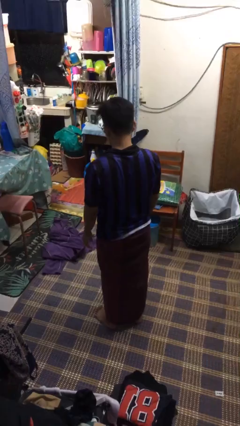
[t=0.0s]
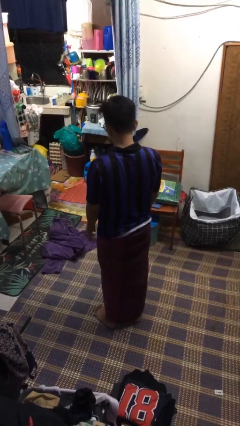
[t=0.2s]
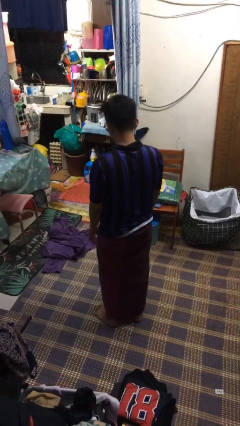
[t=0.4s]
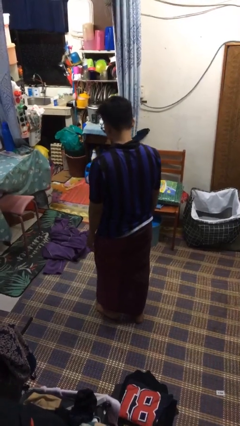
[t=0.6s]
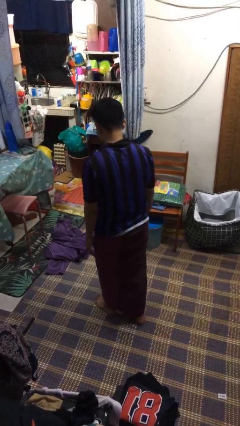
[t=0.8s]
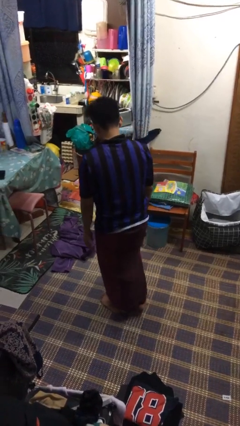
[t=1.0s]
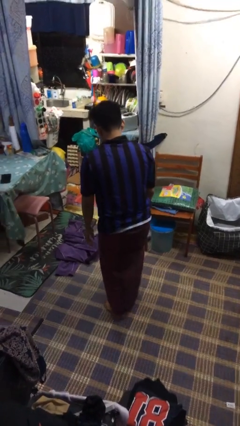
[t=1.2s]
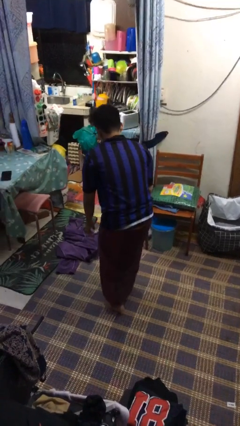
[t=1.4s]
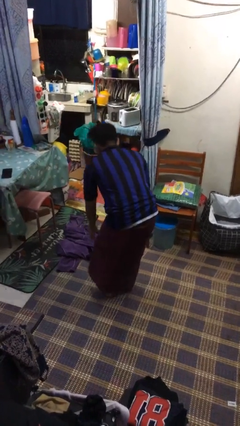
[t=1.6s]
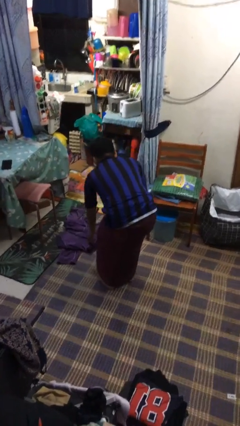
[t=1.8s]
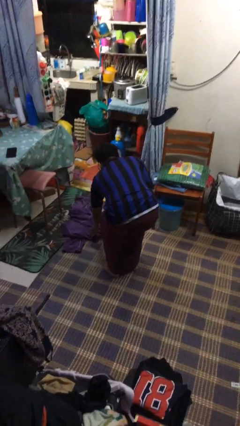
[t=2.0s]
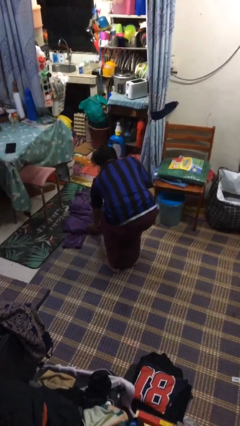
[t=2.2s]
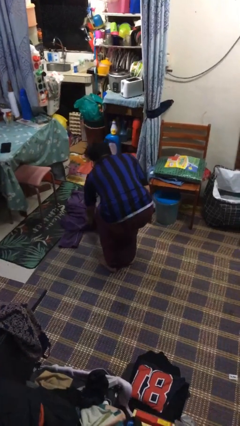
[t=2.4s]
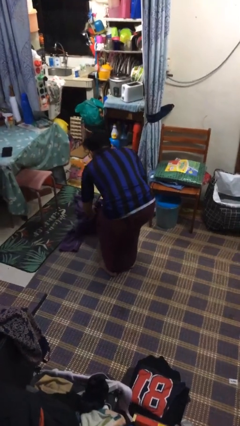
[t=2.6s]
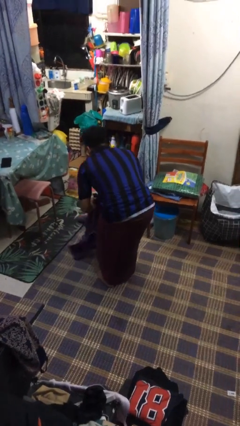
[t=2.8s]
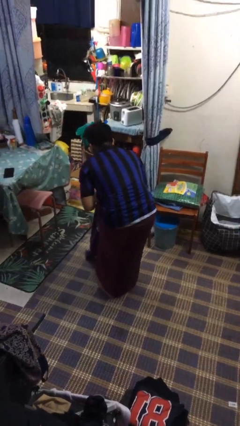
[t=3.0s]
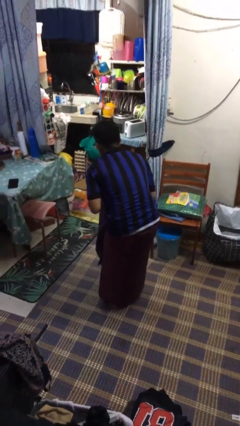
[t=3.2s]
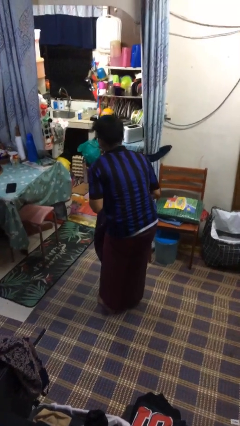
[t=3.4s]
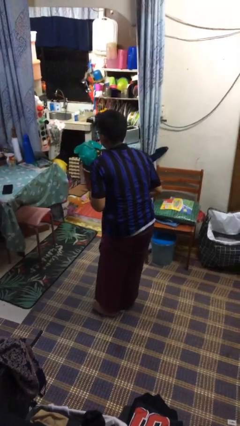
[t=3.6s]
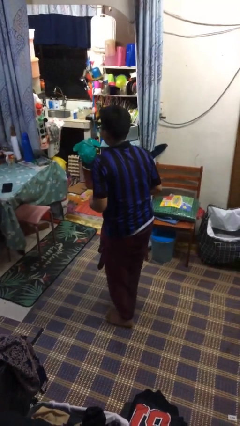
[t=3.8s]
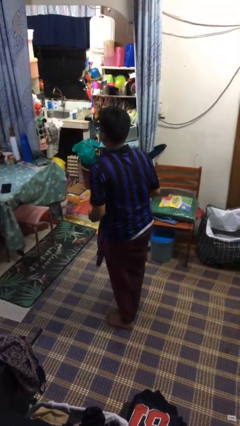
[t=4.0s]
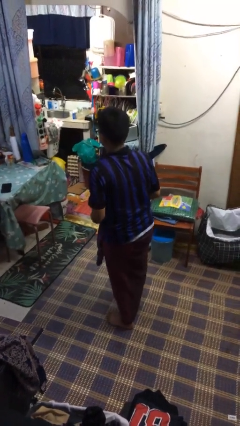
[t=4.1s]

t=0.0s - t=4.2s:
person picks up object from floor

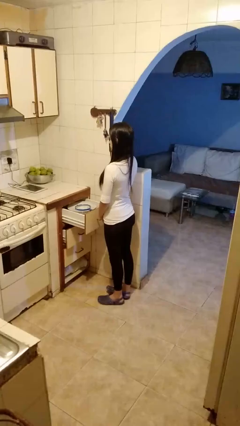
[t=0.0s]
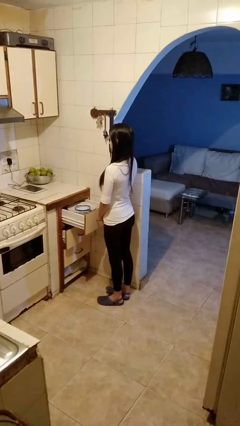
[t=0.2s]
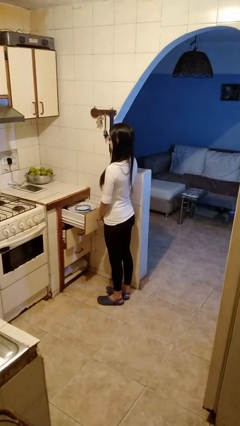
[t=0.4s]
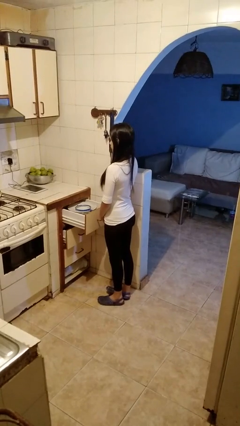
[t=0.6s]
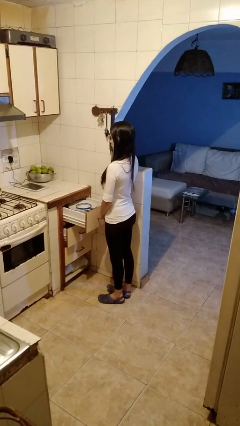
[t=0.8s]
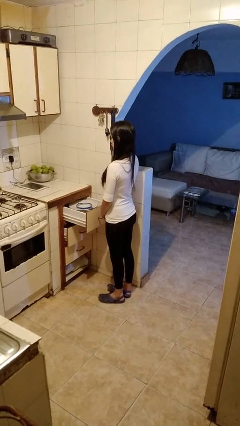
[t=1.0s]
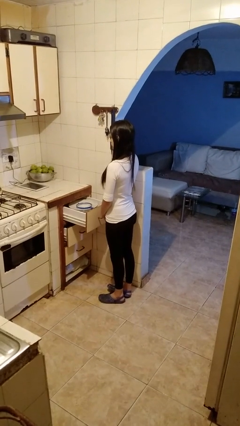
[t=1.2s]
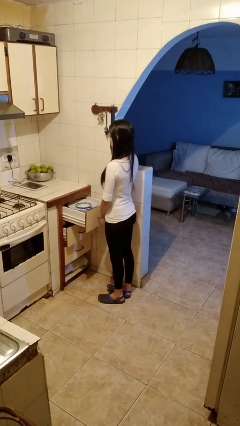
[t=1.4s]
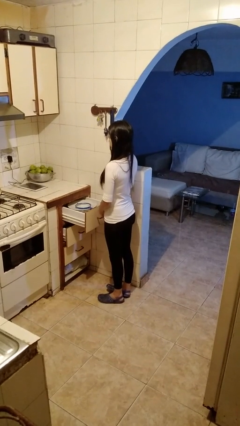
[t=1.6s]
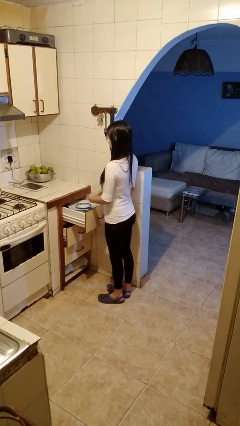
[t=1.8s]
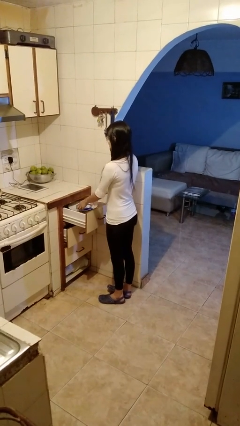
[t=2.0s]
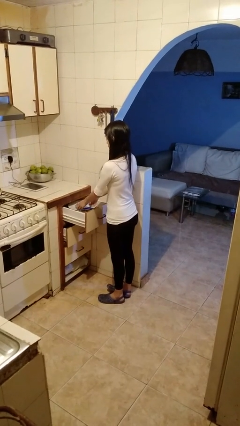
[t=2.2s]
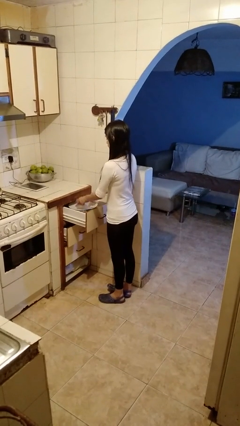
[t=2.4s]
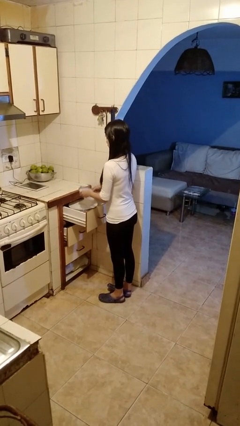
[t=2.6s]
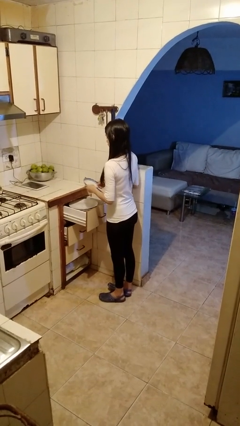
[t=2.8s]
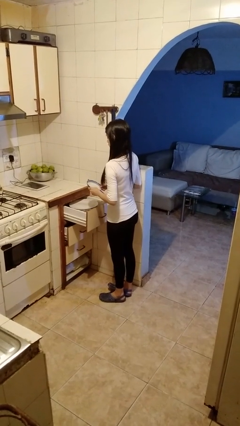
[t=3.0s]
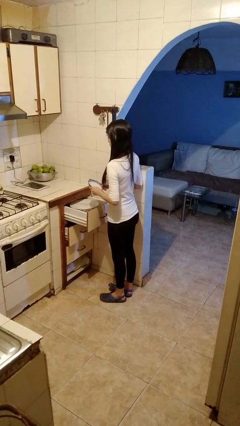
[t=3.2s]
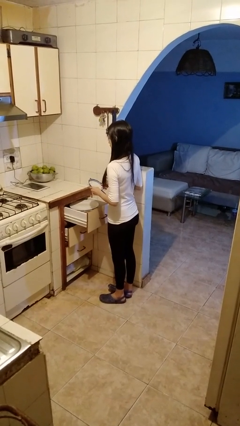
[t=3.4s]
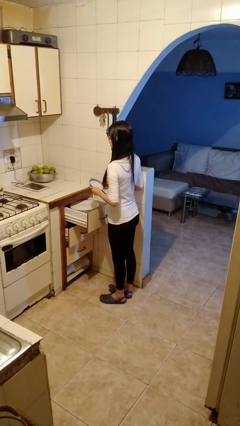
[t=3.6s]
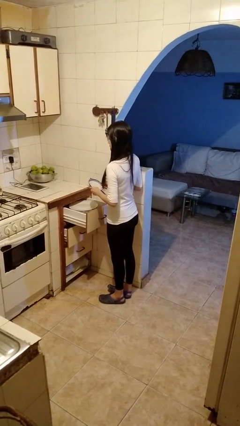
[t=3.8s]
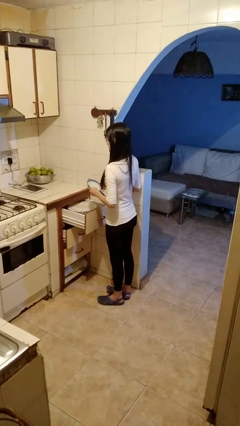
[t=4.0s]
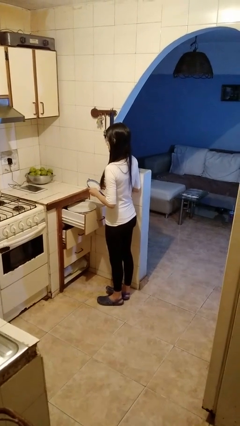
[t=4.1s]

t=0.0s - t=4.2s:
person picks up object from cabinet

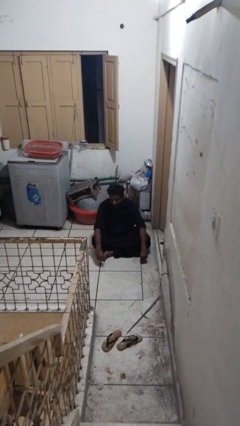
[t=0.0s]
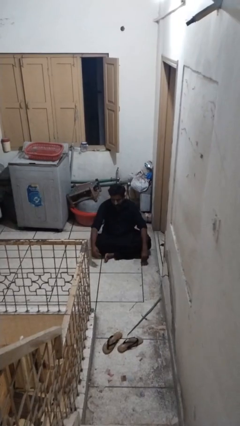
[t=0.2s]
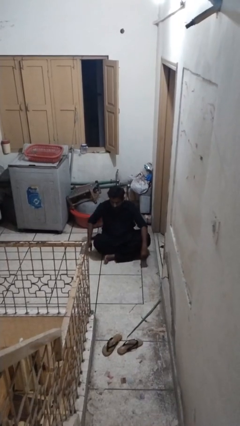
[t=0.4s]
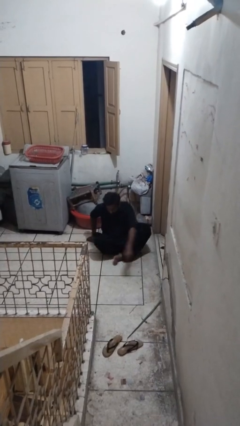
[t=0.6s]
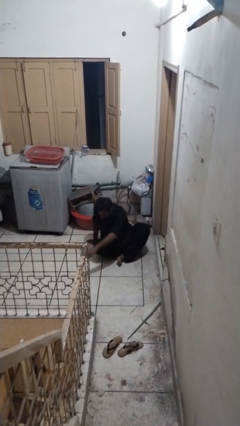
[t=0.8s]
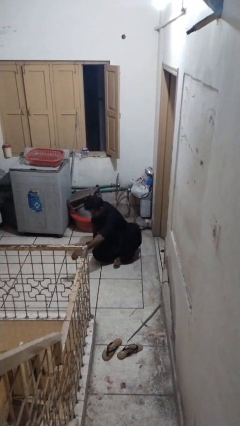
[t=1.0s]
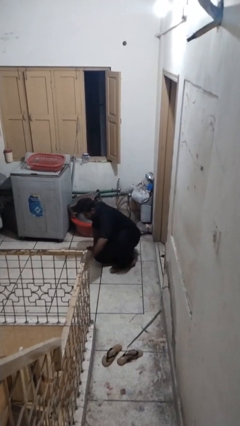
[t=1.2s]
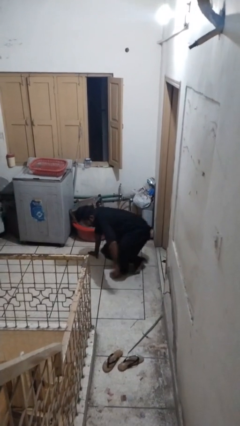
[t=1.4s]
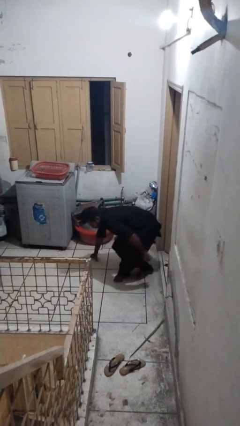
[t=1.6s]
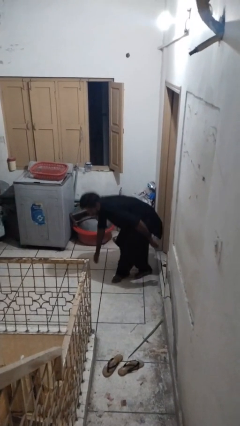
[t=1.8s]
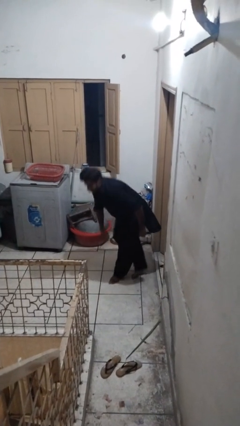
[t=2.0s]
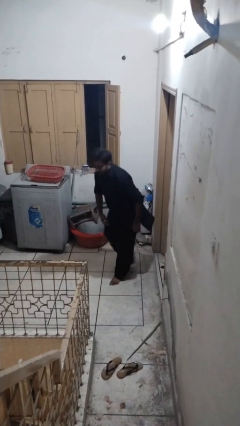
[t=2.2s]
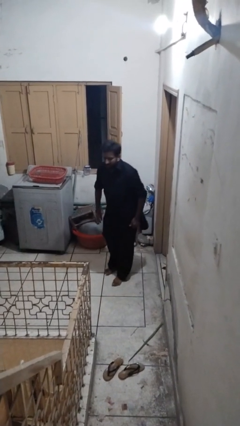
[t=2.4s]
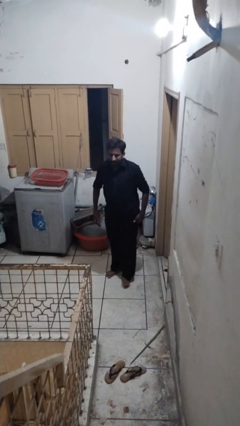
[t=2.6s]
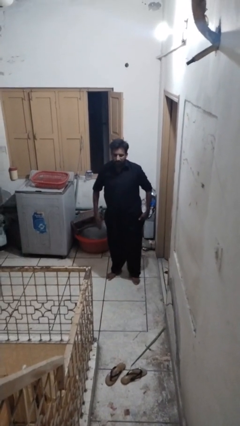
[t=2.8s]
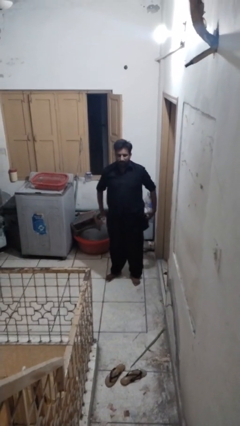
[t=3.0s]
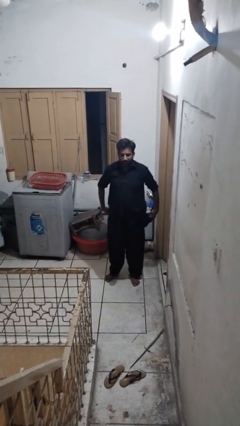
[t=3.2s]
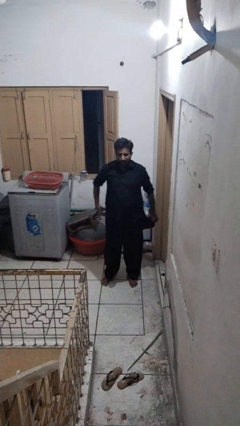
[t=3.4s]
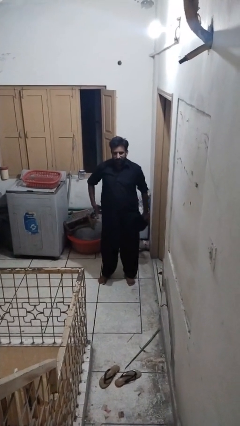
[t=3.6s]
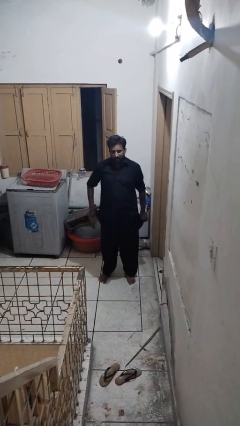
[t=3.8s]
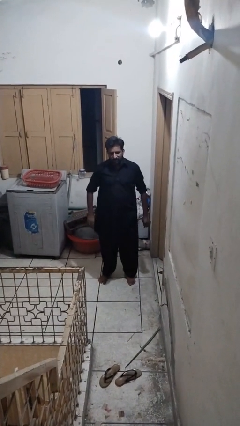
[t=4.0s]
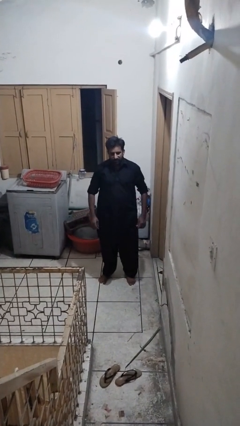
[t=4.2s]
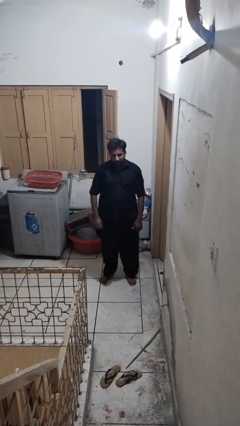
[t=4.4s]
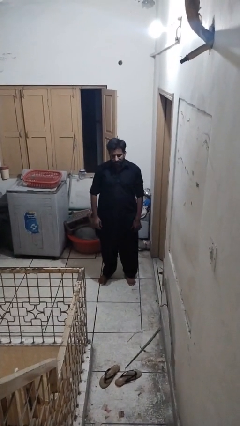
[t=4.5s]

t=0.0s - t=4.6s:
person stands up from floor

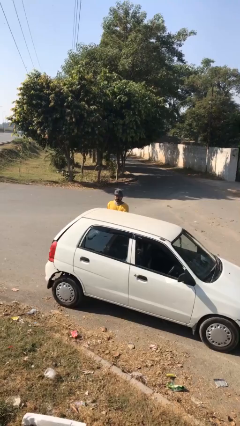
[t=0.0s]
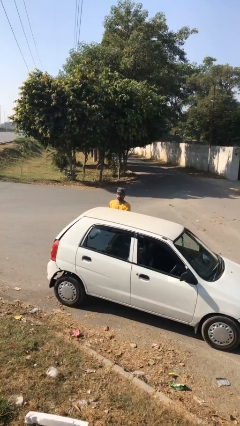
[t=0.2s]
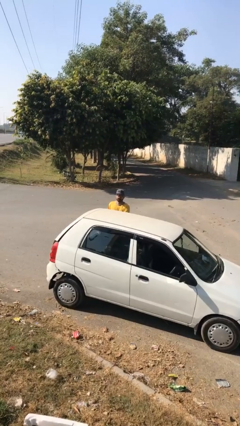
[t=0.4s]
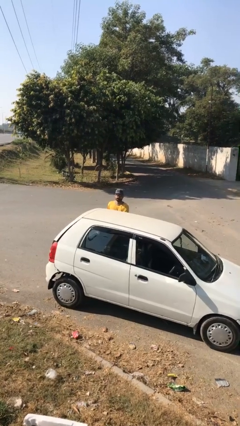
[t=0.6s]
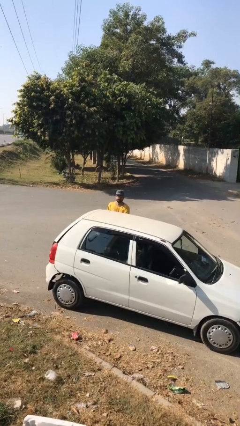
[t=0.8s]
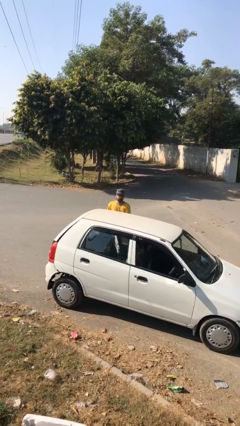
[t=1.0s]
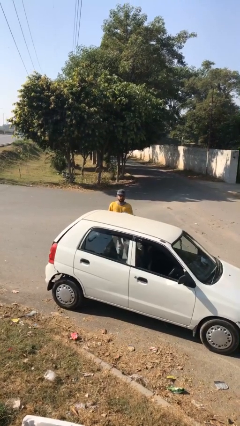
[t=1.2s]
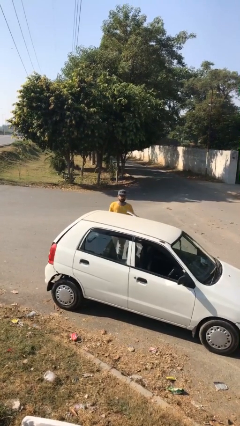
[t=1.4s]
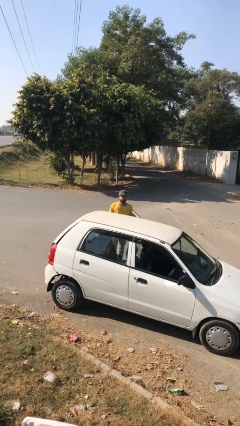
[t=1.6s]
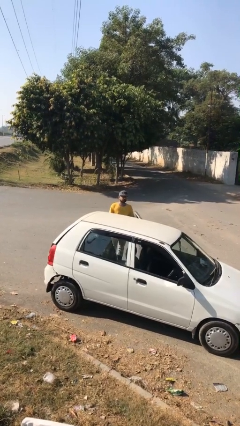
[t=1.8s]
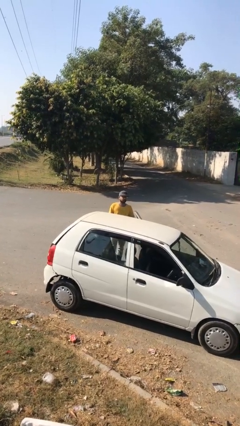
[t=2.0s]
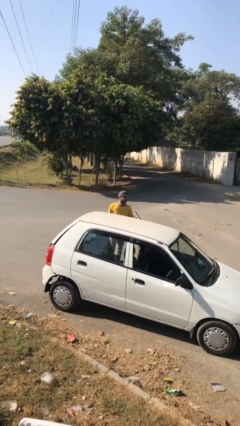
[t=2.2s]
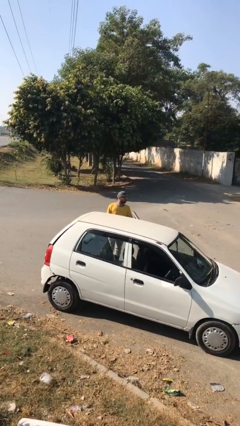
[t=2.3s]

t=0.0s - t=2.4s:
person opens car door

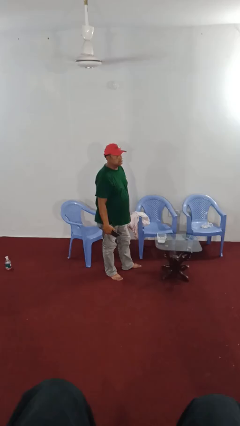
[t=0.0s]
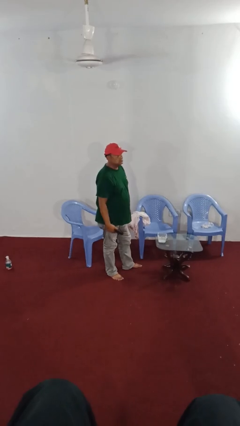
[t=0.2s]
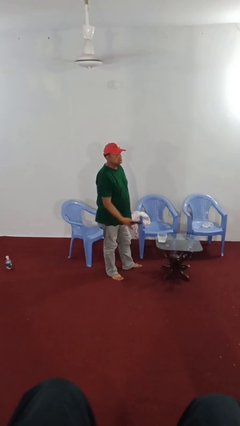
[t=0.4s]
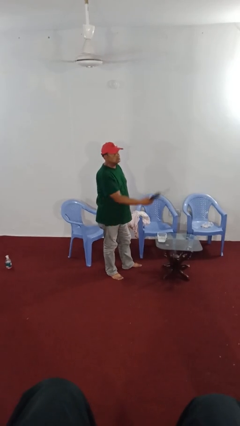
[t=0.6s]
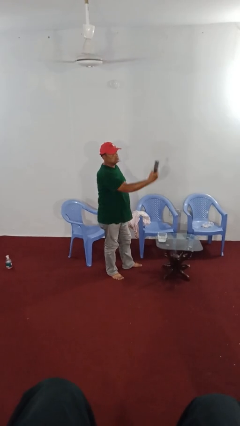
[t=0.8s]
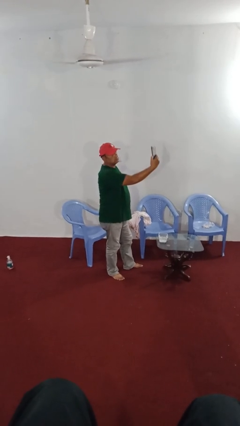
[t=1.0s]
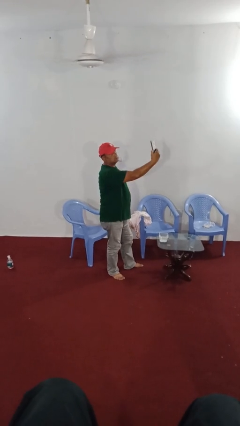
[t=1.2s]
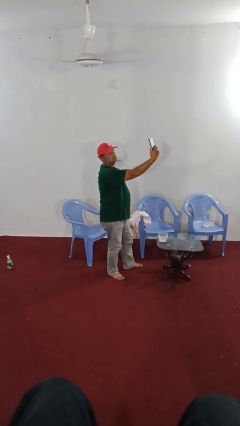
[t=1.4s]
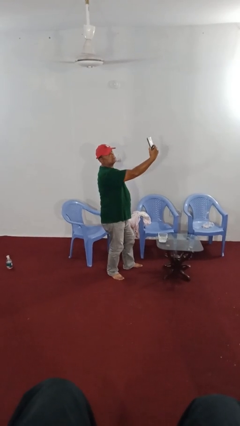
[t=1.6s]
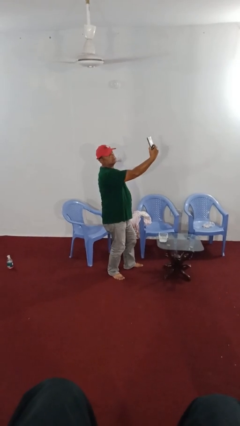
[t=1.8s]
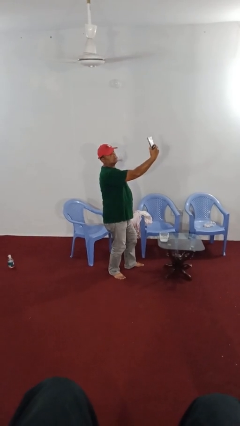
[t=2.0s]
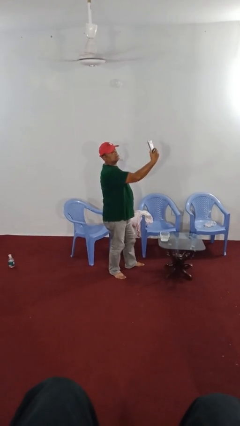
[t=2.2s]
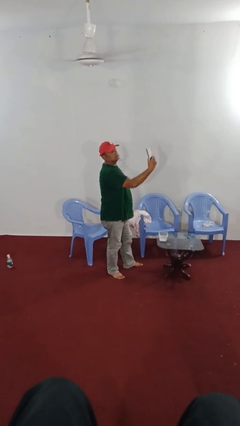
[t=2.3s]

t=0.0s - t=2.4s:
person takes selfie
